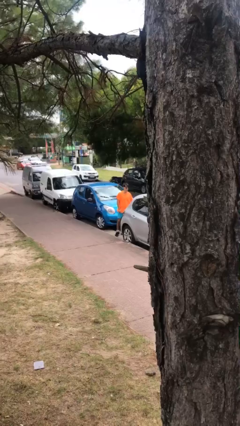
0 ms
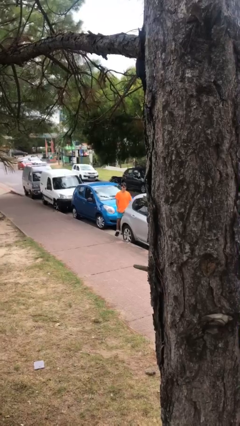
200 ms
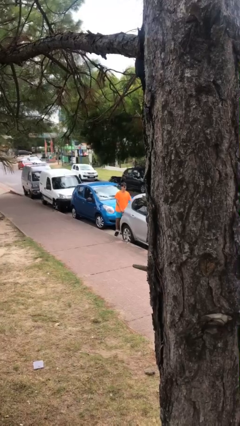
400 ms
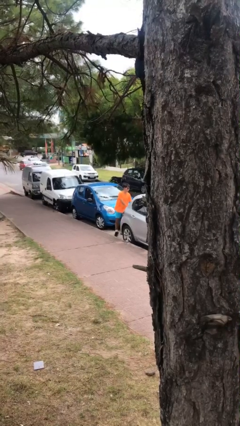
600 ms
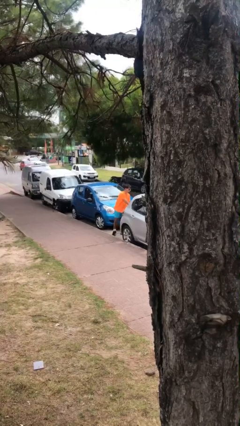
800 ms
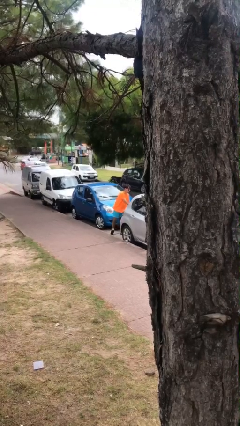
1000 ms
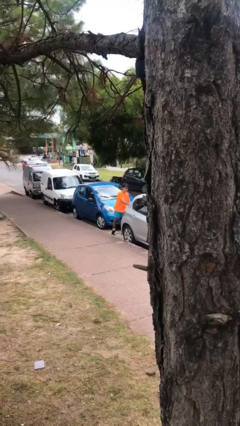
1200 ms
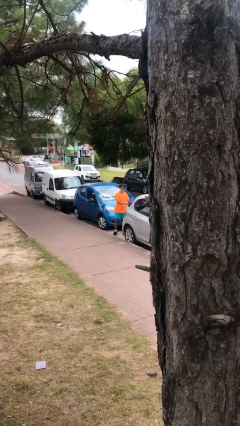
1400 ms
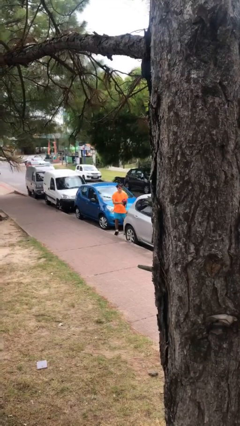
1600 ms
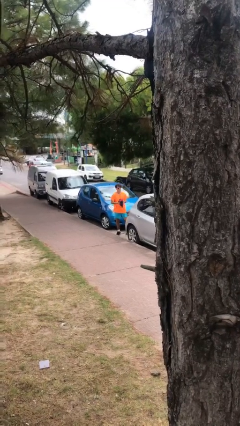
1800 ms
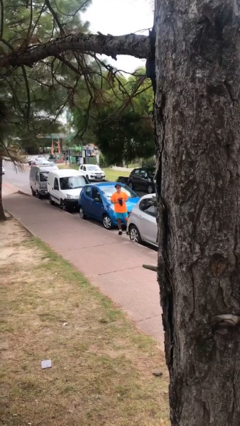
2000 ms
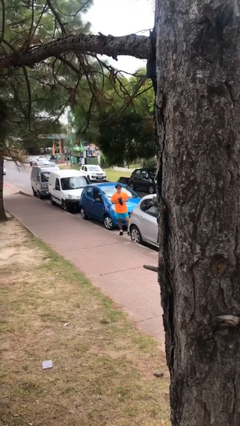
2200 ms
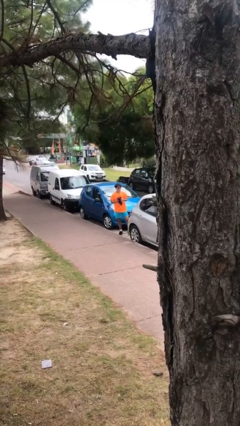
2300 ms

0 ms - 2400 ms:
person unloads car

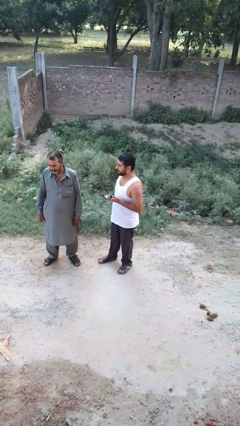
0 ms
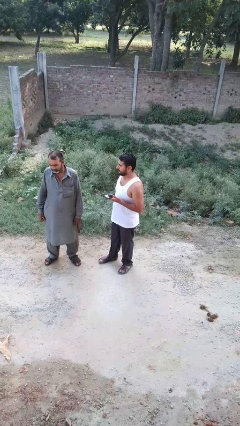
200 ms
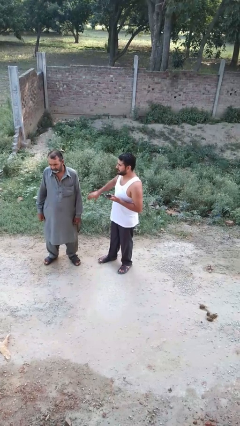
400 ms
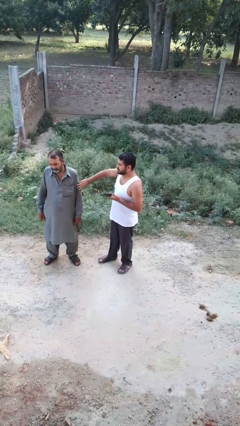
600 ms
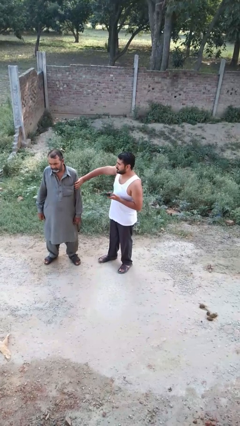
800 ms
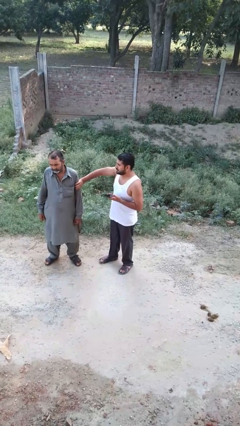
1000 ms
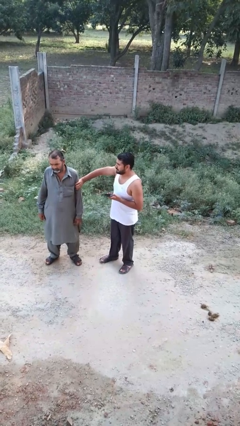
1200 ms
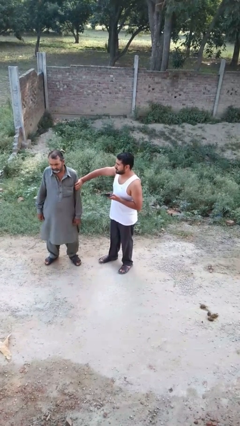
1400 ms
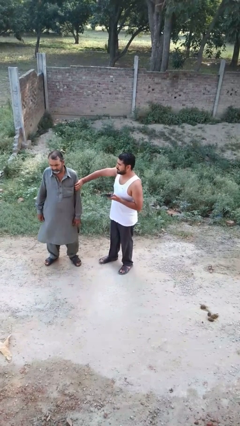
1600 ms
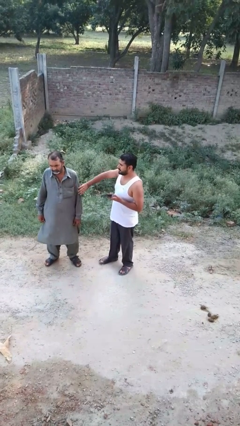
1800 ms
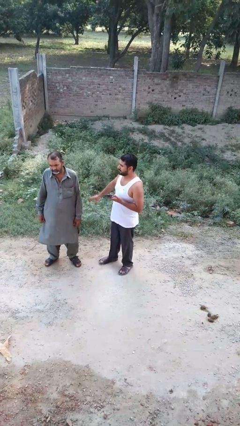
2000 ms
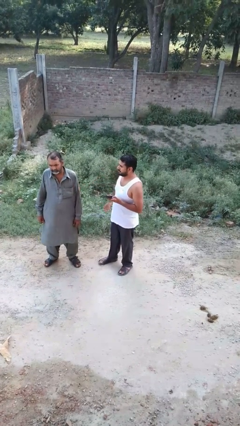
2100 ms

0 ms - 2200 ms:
person grabs person by bicep

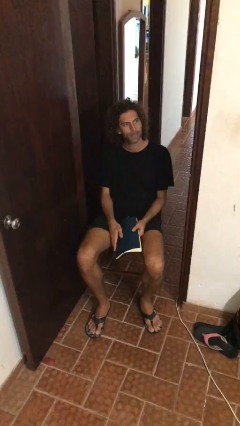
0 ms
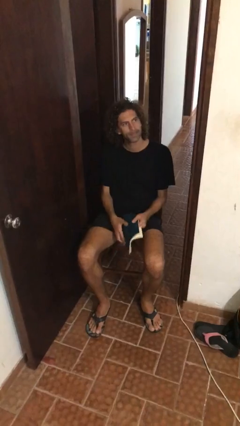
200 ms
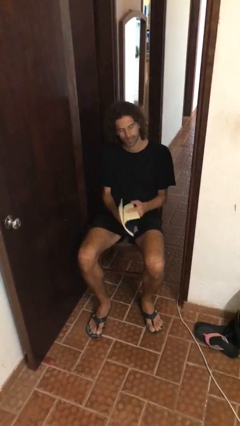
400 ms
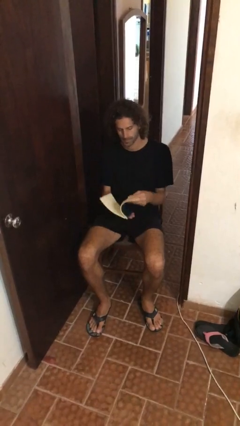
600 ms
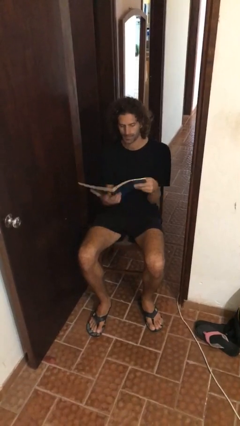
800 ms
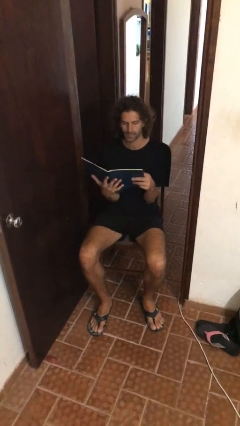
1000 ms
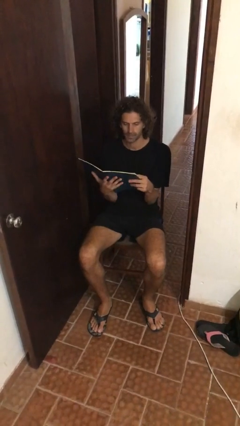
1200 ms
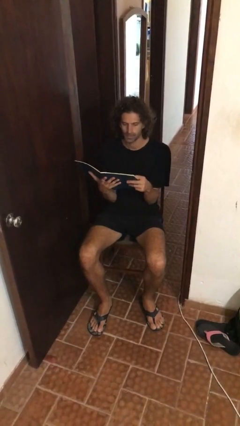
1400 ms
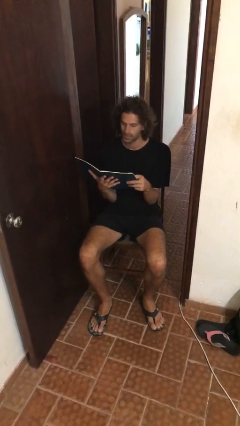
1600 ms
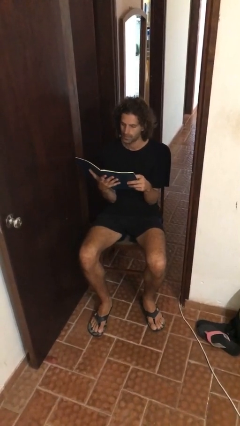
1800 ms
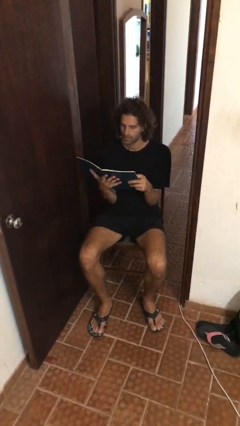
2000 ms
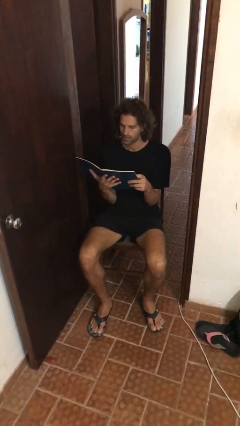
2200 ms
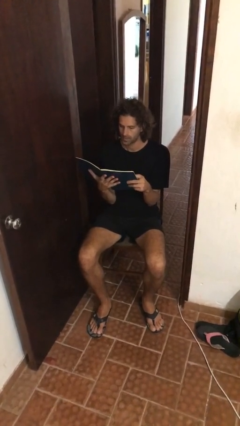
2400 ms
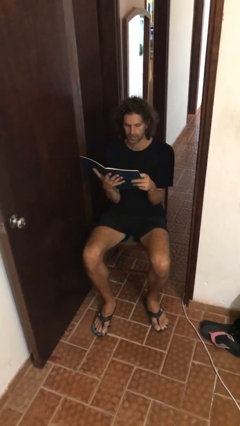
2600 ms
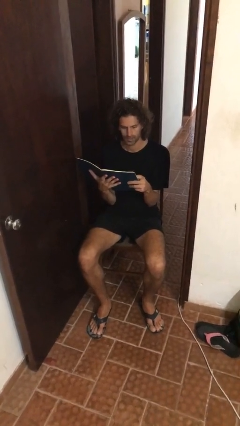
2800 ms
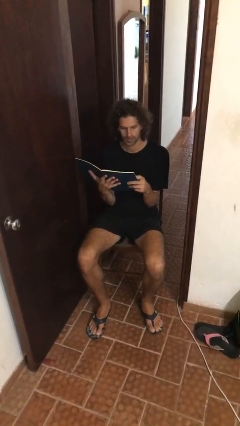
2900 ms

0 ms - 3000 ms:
person reads document

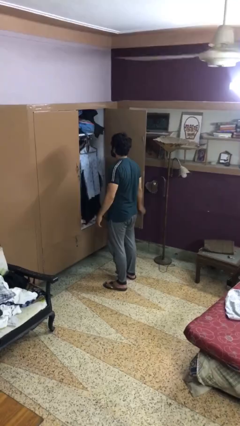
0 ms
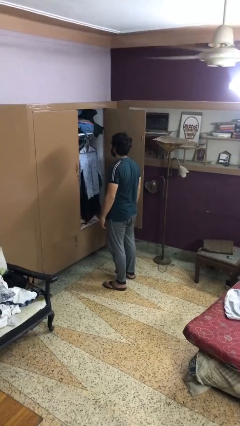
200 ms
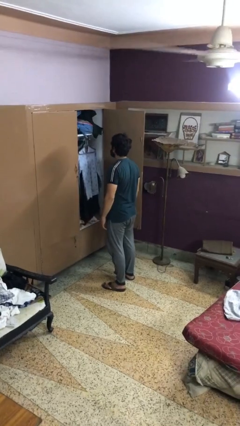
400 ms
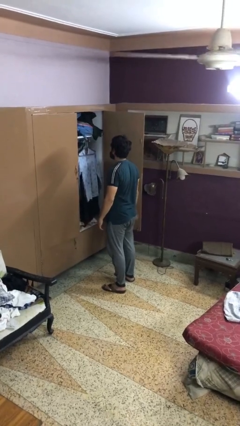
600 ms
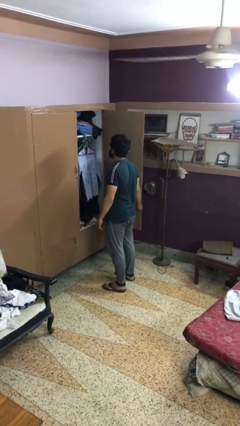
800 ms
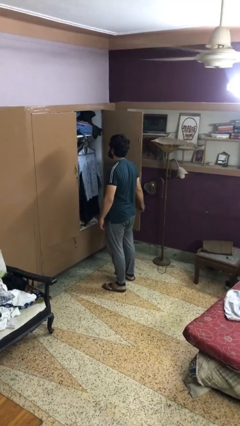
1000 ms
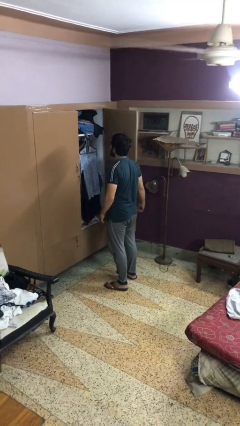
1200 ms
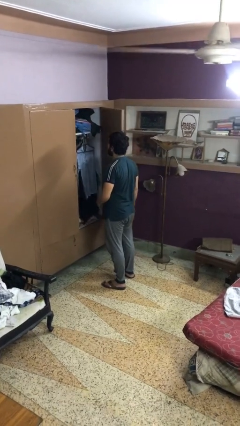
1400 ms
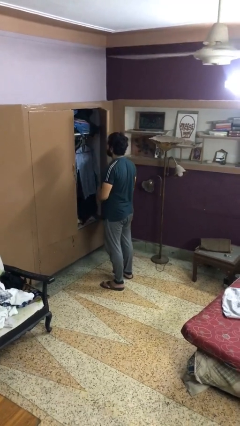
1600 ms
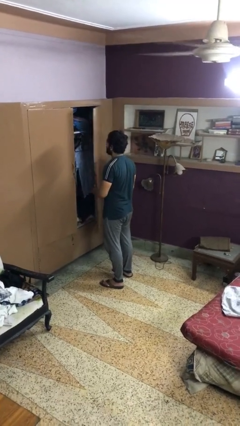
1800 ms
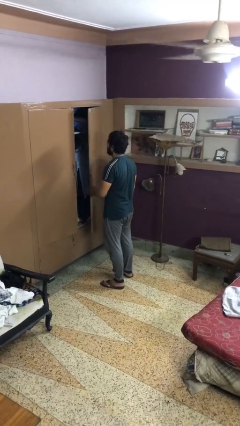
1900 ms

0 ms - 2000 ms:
person closes closet door

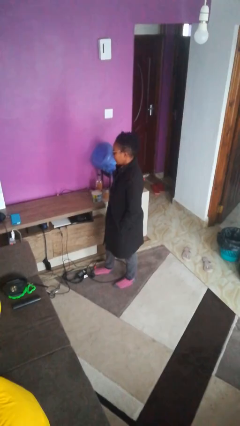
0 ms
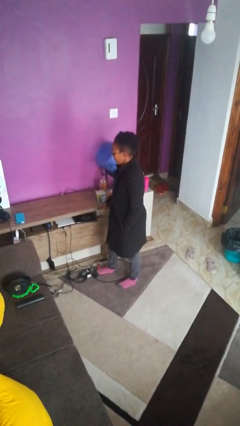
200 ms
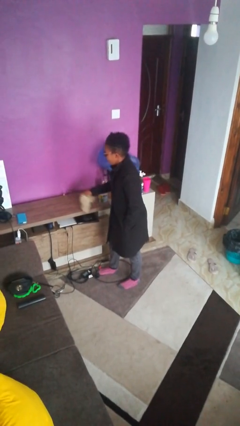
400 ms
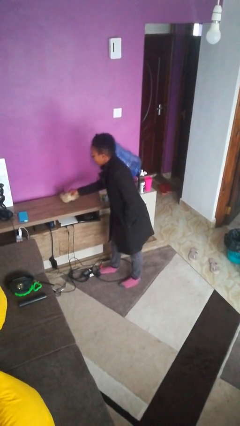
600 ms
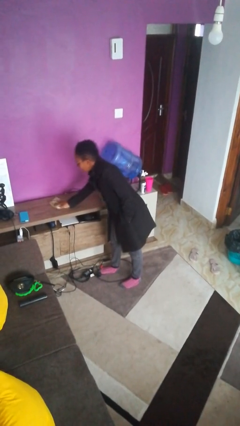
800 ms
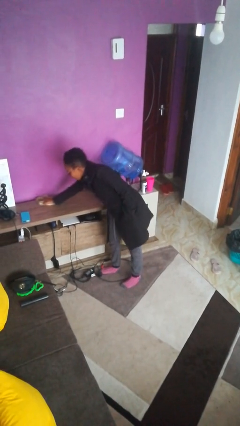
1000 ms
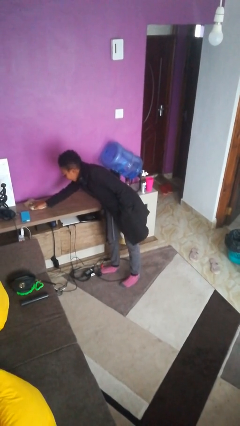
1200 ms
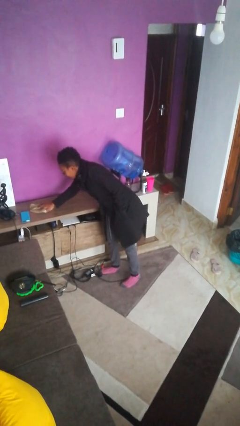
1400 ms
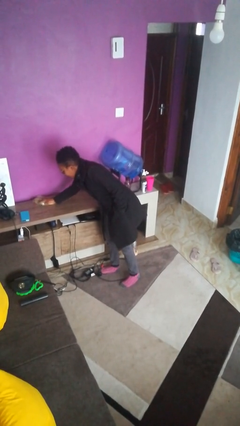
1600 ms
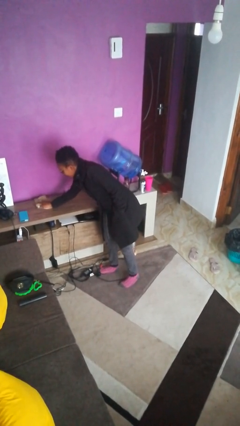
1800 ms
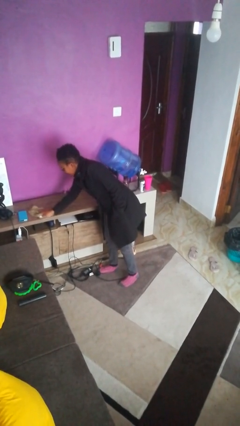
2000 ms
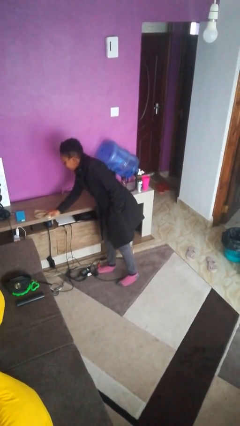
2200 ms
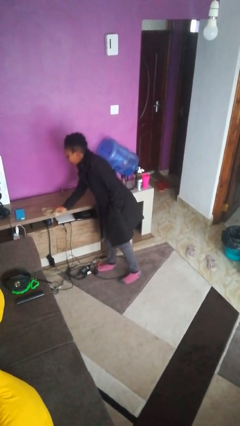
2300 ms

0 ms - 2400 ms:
person cleans table with rag

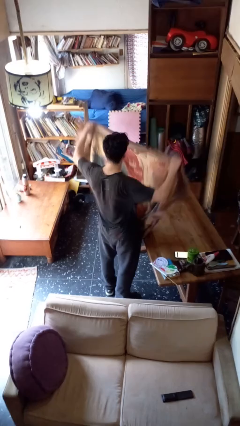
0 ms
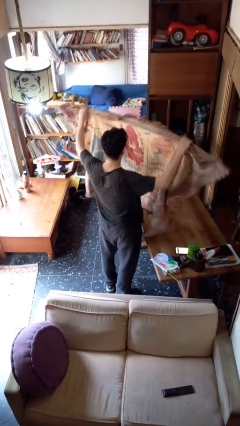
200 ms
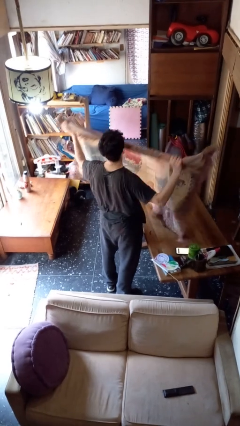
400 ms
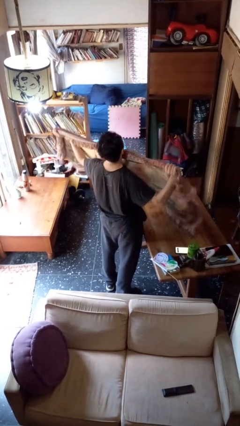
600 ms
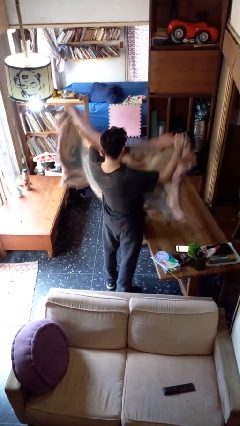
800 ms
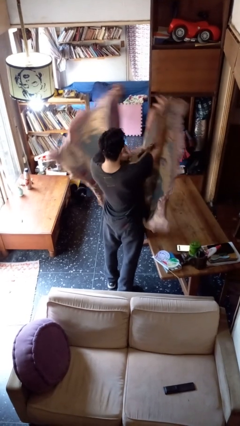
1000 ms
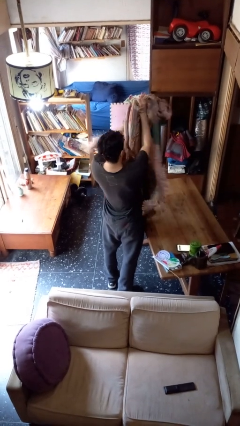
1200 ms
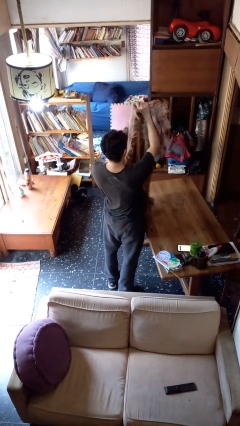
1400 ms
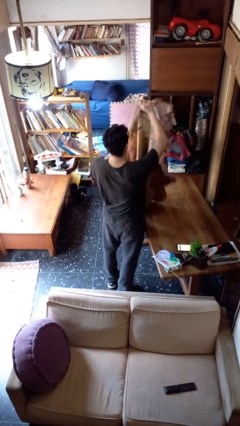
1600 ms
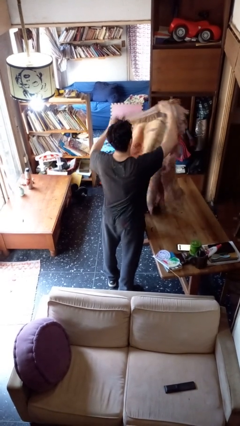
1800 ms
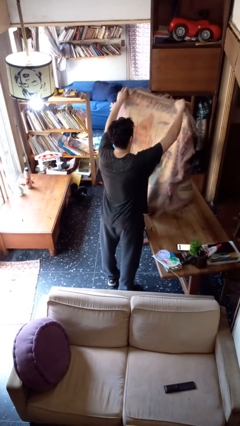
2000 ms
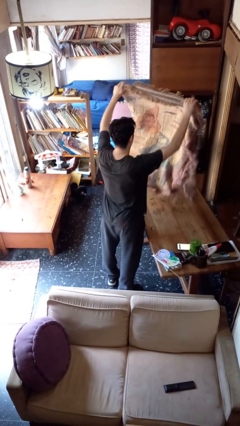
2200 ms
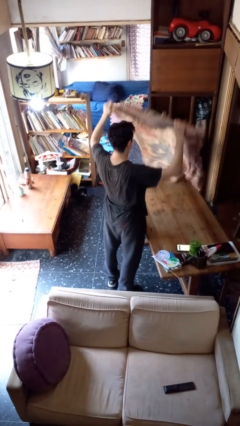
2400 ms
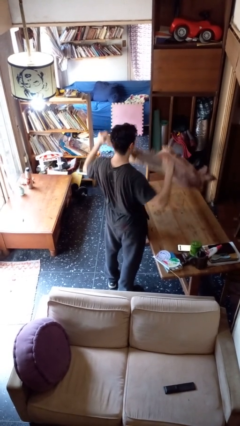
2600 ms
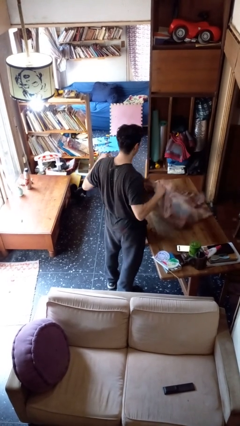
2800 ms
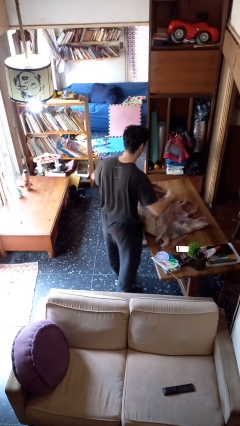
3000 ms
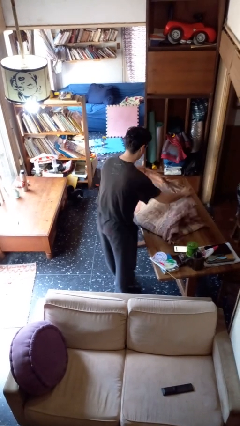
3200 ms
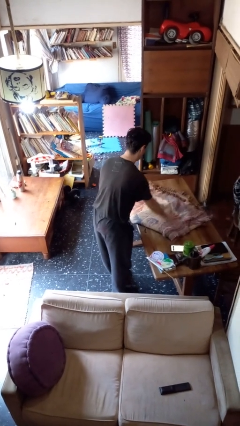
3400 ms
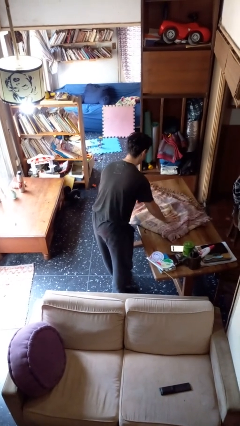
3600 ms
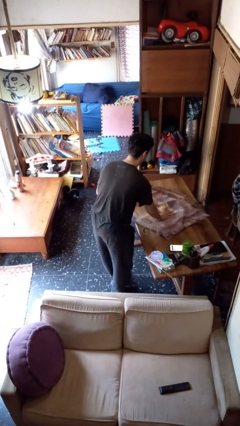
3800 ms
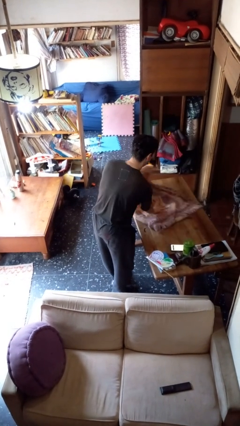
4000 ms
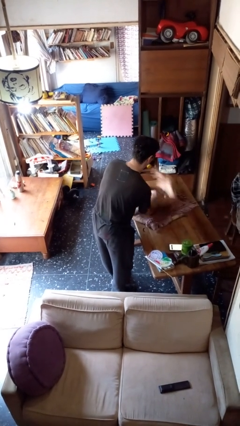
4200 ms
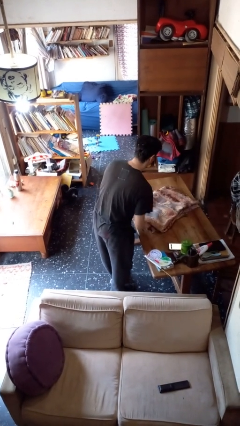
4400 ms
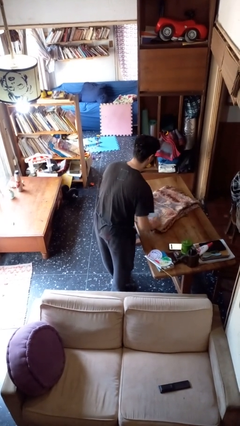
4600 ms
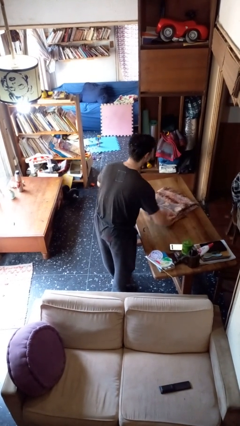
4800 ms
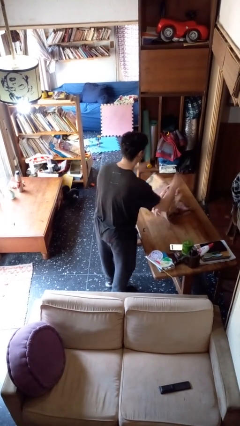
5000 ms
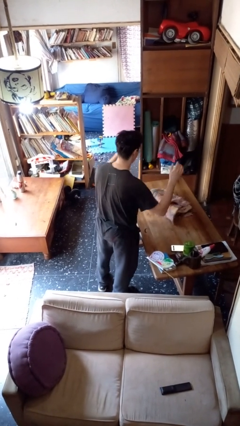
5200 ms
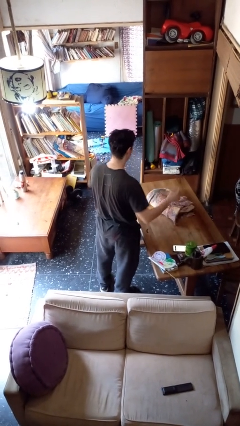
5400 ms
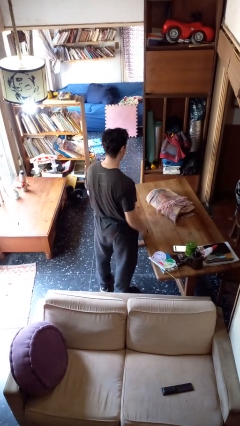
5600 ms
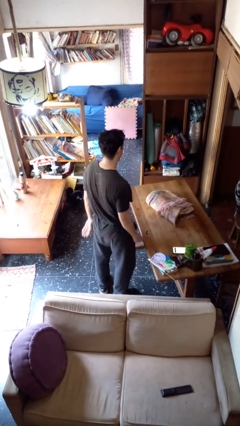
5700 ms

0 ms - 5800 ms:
person folds blanket
